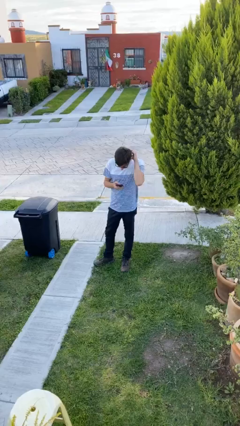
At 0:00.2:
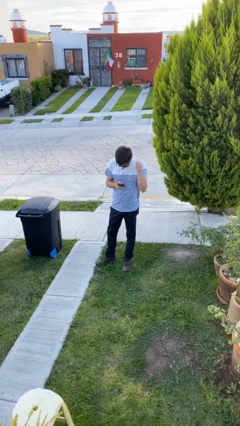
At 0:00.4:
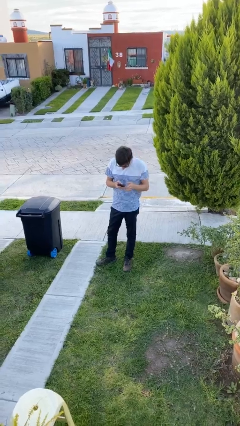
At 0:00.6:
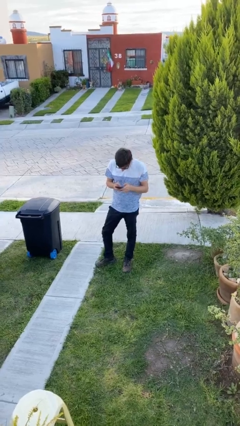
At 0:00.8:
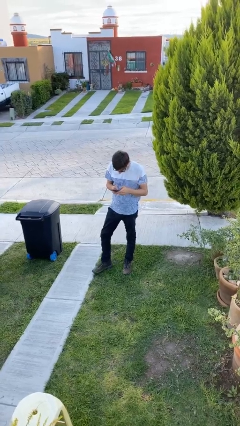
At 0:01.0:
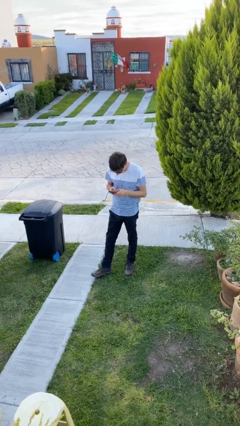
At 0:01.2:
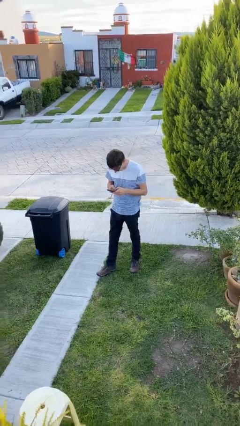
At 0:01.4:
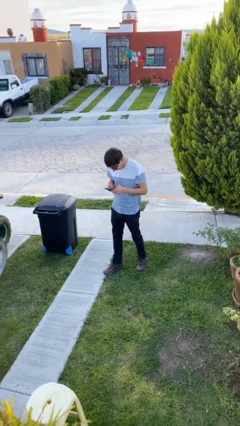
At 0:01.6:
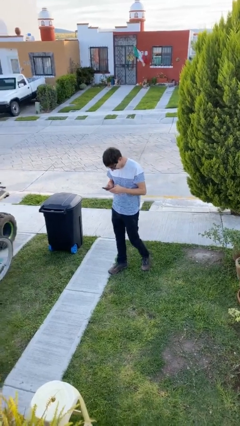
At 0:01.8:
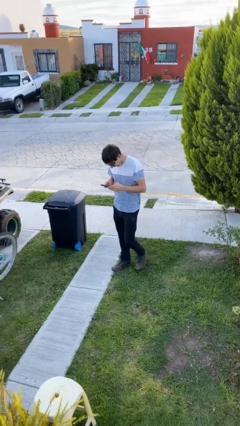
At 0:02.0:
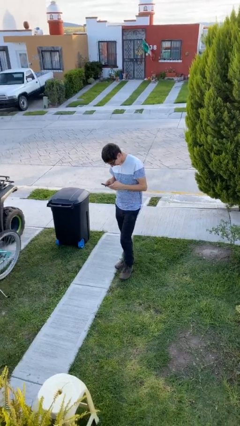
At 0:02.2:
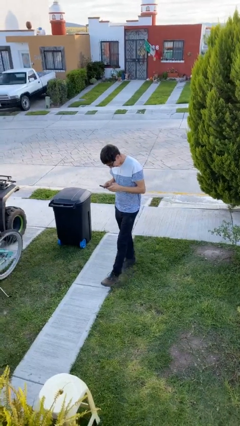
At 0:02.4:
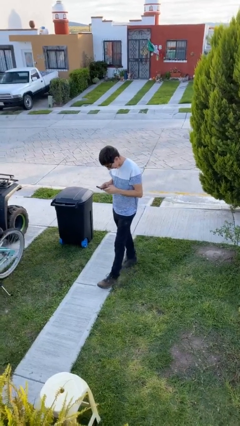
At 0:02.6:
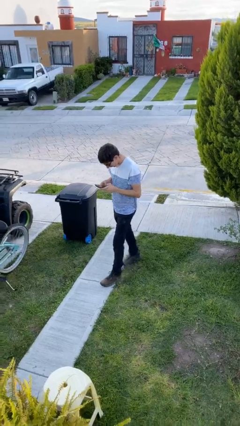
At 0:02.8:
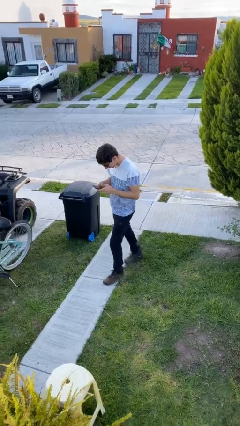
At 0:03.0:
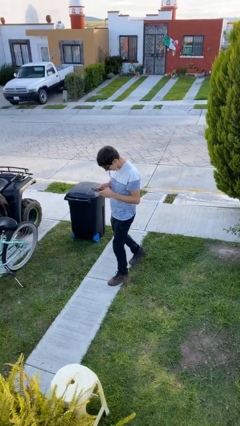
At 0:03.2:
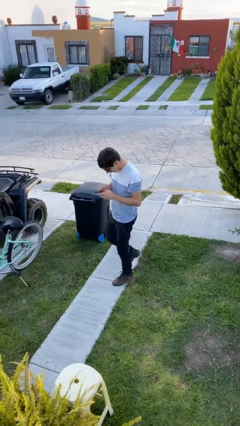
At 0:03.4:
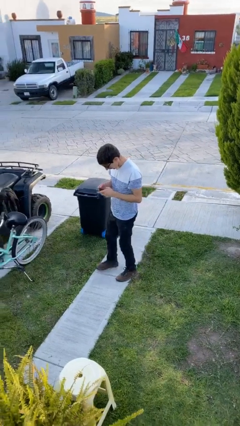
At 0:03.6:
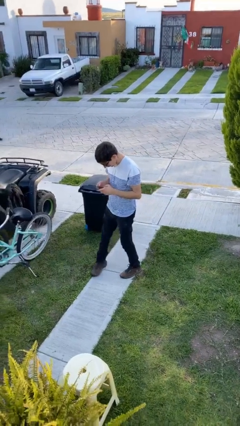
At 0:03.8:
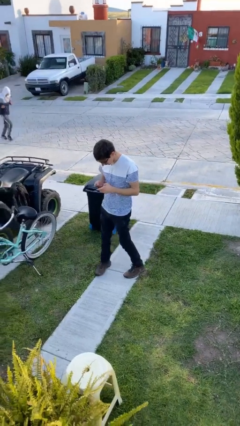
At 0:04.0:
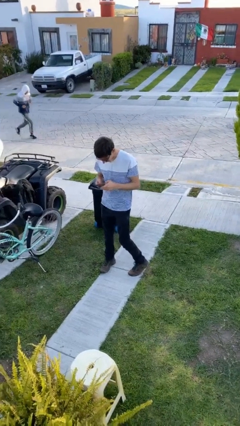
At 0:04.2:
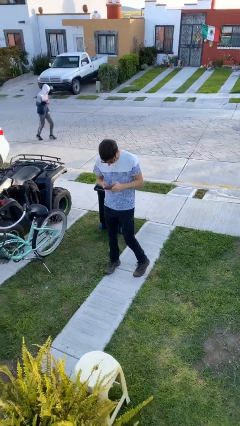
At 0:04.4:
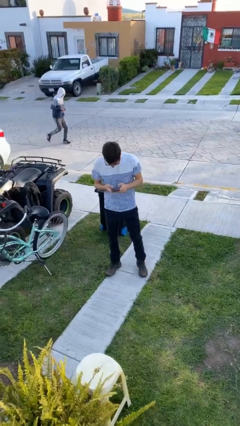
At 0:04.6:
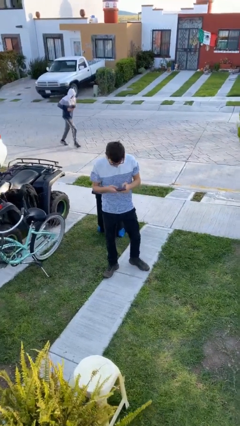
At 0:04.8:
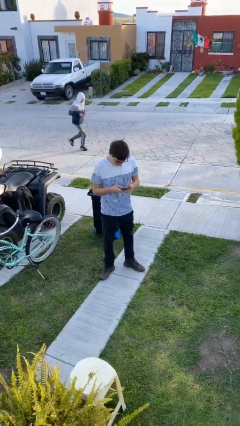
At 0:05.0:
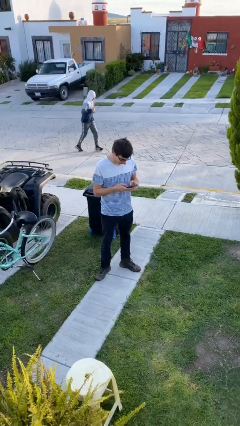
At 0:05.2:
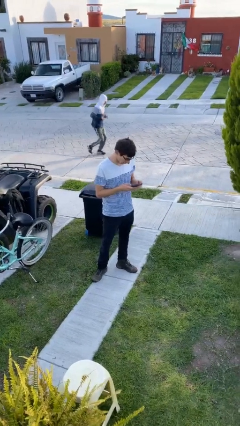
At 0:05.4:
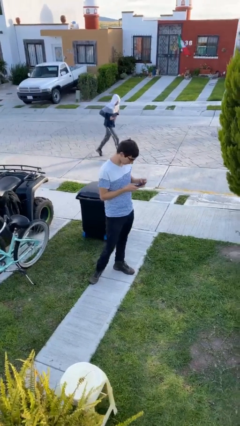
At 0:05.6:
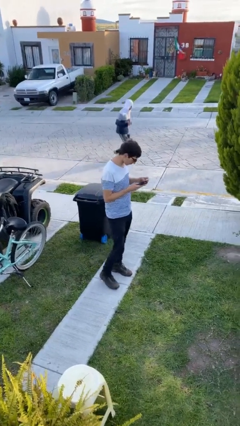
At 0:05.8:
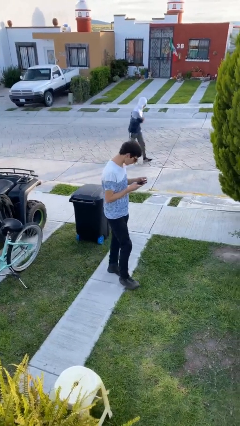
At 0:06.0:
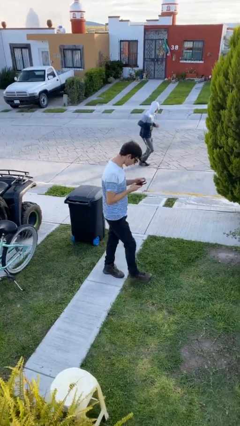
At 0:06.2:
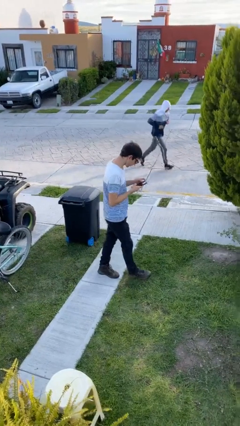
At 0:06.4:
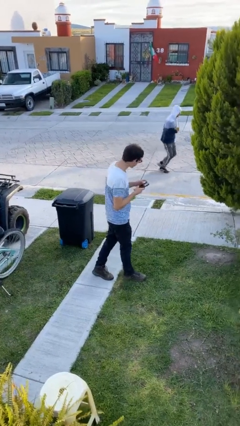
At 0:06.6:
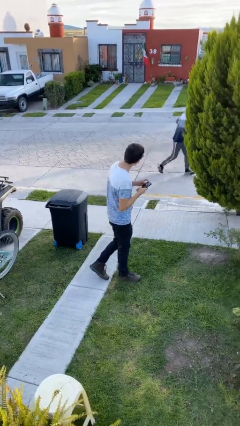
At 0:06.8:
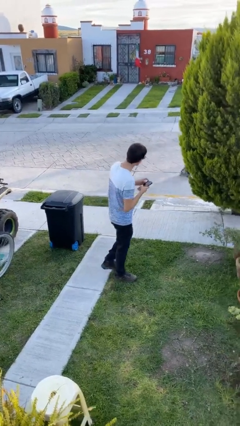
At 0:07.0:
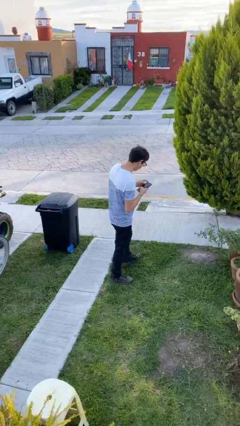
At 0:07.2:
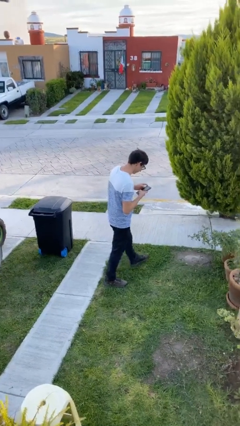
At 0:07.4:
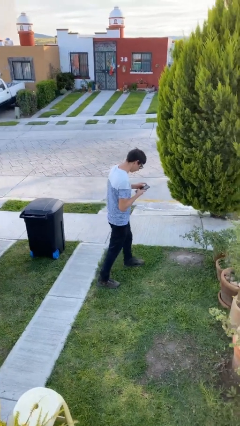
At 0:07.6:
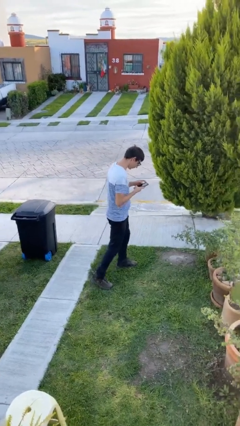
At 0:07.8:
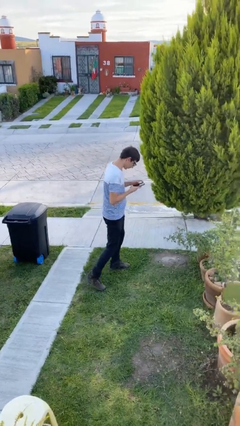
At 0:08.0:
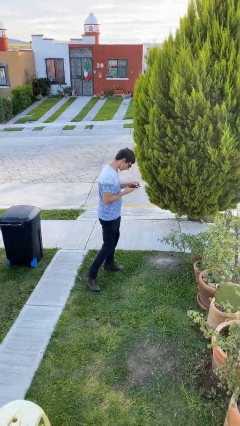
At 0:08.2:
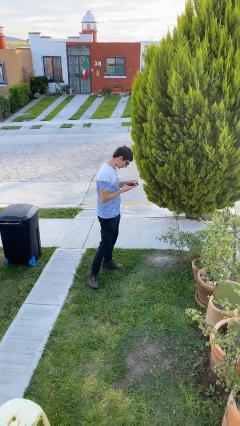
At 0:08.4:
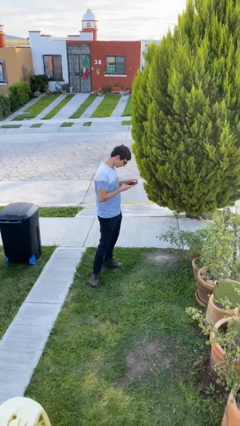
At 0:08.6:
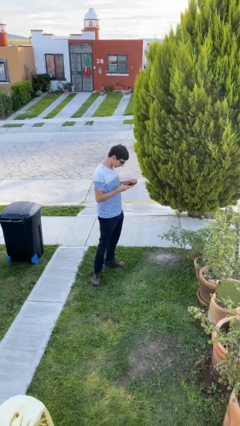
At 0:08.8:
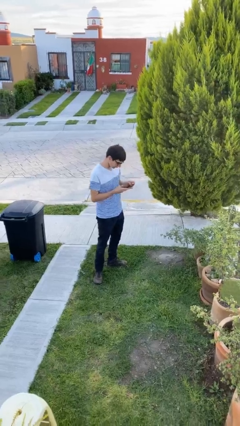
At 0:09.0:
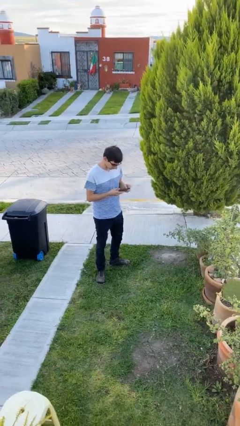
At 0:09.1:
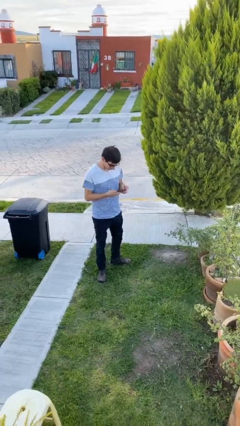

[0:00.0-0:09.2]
person texts on phone

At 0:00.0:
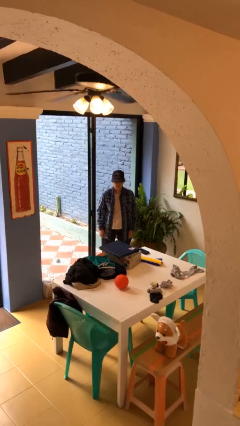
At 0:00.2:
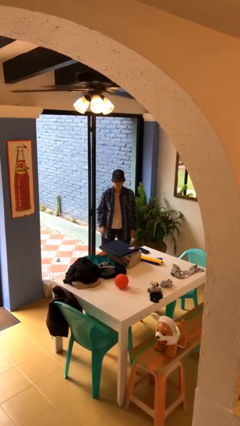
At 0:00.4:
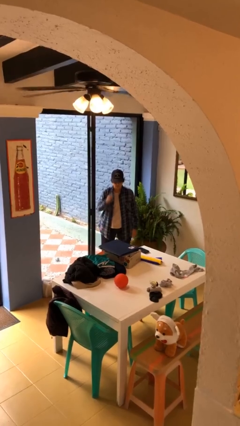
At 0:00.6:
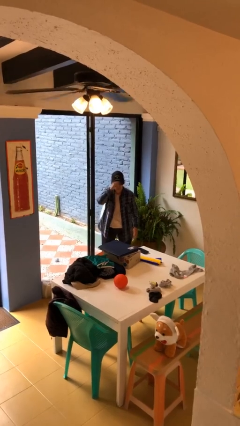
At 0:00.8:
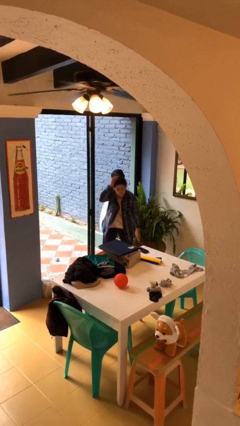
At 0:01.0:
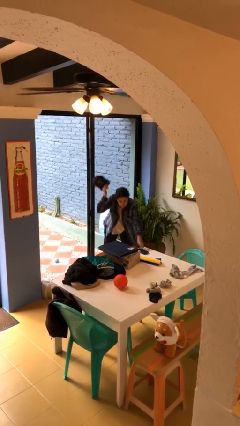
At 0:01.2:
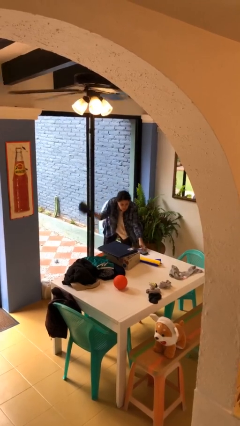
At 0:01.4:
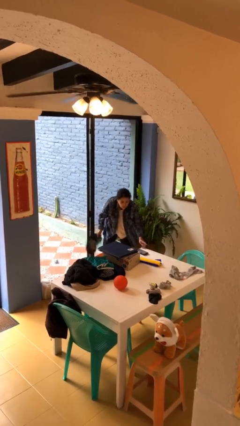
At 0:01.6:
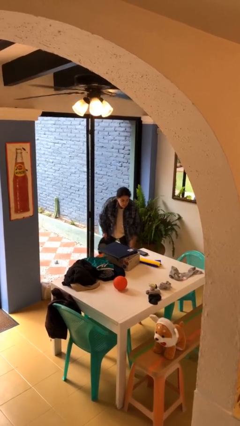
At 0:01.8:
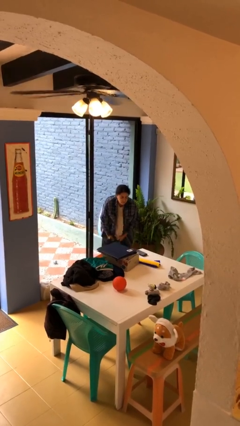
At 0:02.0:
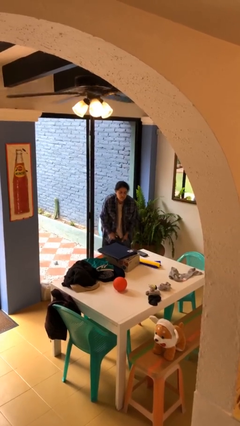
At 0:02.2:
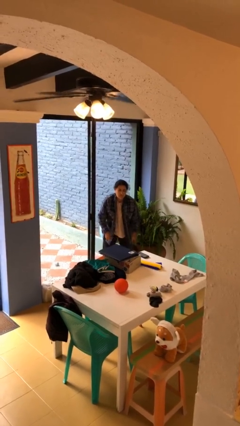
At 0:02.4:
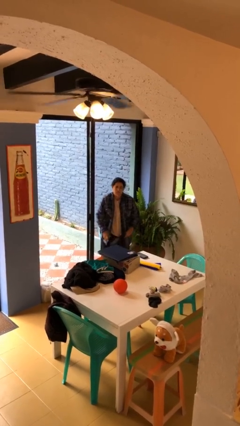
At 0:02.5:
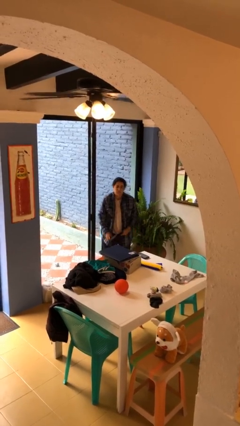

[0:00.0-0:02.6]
person takes off hat

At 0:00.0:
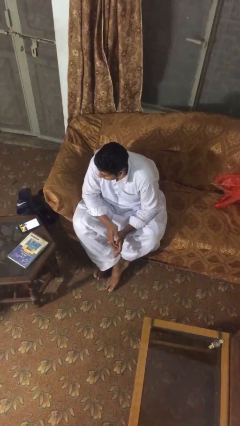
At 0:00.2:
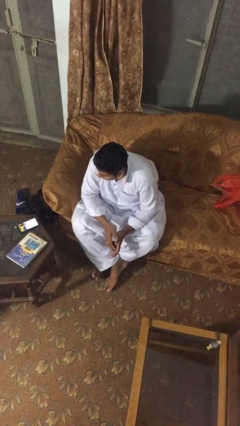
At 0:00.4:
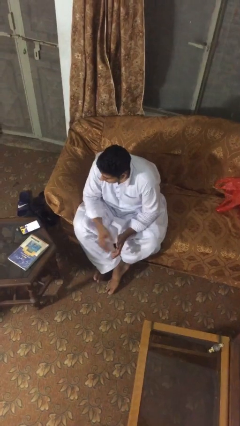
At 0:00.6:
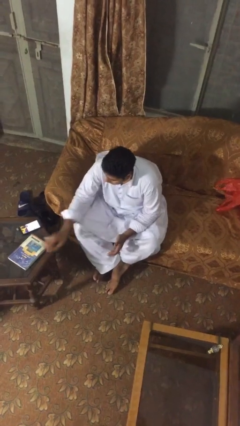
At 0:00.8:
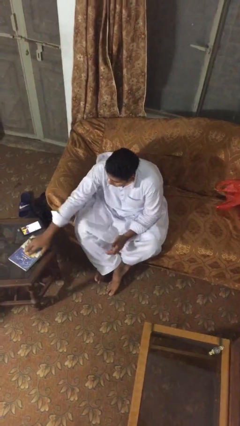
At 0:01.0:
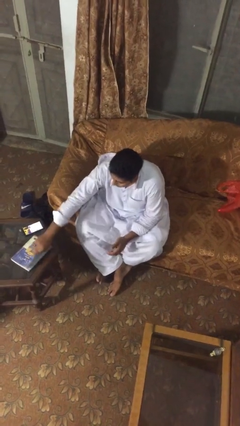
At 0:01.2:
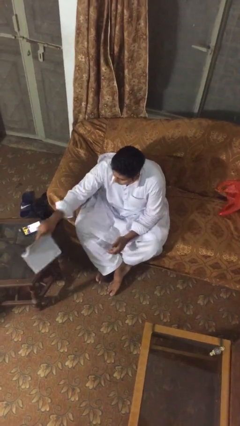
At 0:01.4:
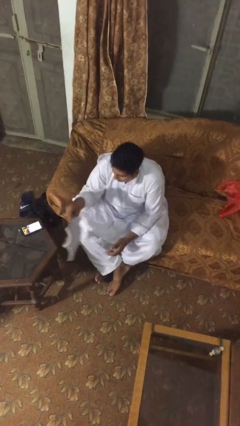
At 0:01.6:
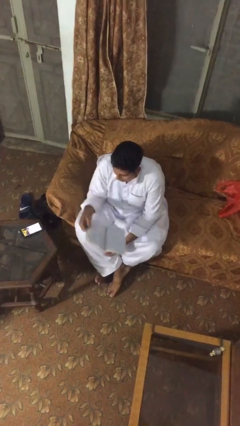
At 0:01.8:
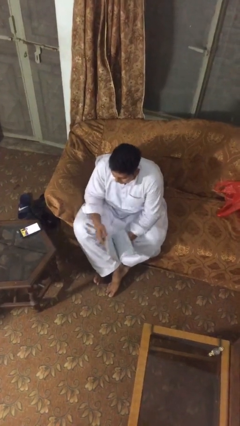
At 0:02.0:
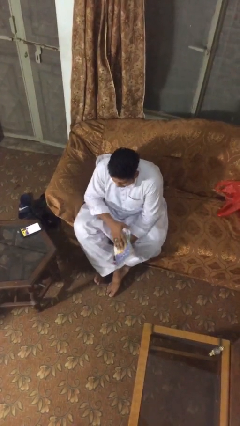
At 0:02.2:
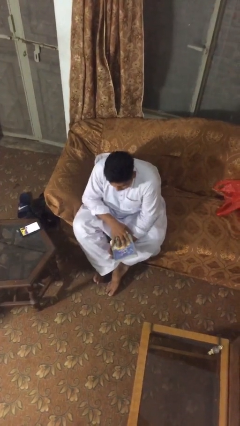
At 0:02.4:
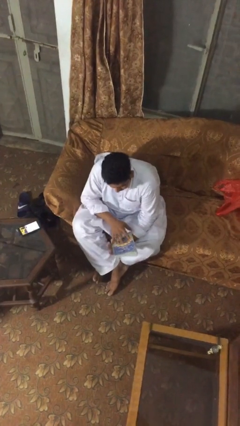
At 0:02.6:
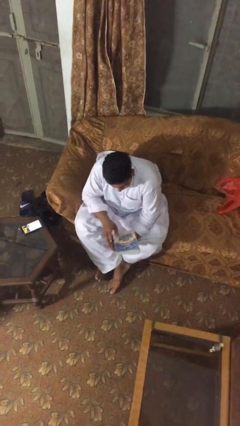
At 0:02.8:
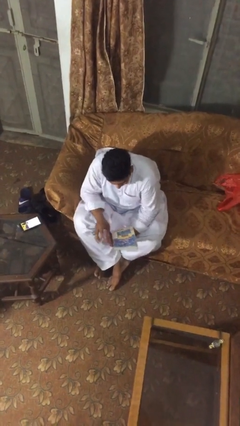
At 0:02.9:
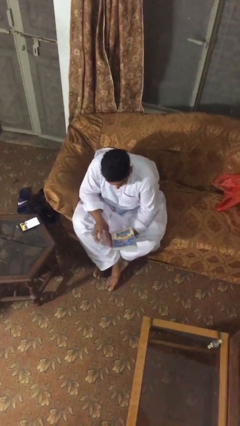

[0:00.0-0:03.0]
person picks up object from table

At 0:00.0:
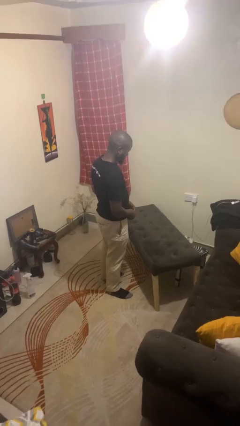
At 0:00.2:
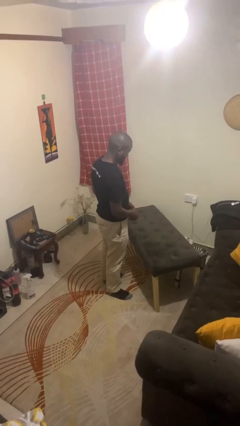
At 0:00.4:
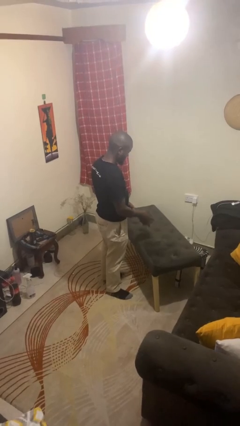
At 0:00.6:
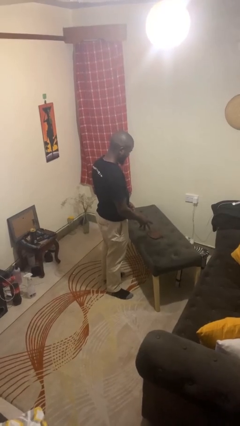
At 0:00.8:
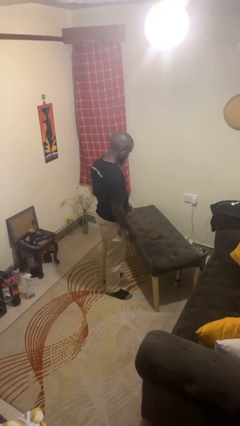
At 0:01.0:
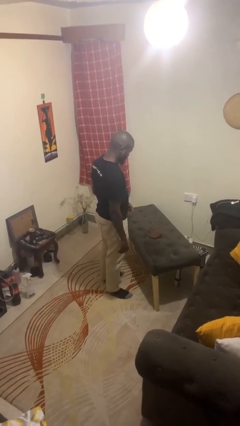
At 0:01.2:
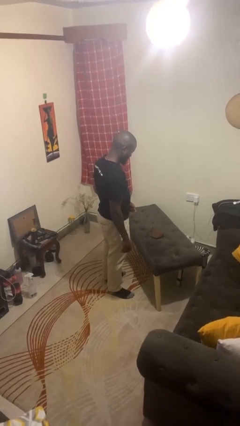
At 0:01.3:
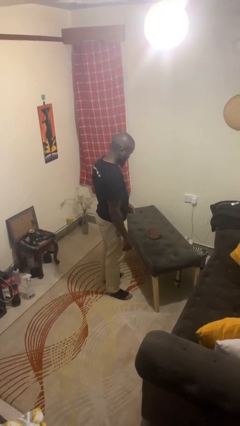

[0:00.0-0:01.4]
person throws object on table

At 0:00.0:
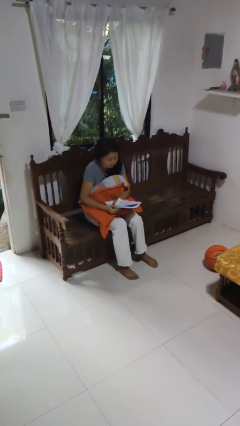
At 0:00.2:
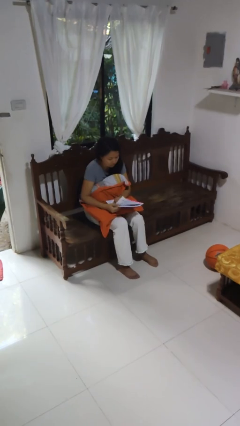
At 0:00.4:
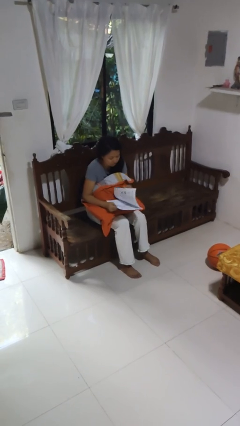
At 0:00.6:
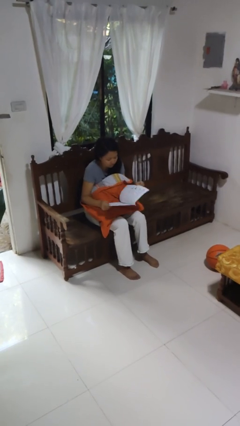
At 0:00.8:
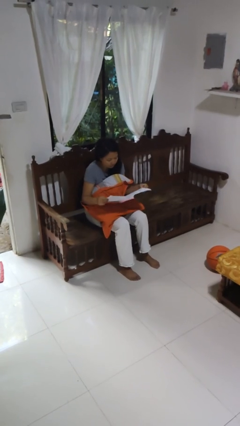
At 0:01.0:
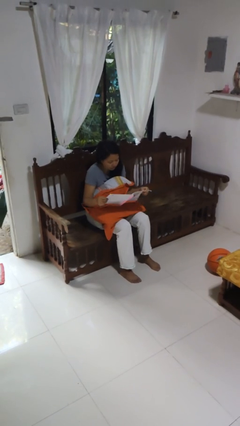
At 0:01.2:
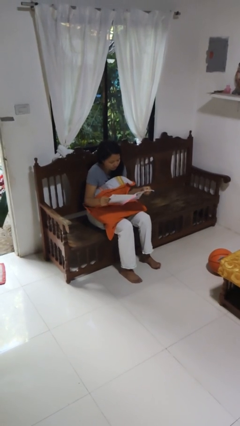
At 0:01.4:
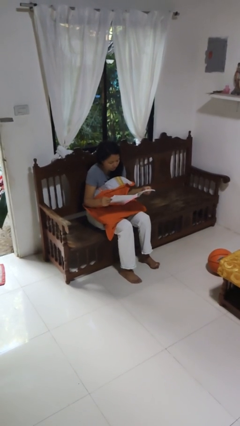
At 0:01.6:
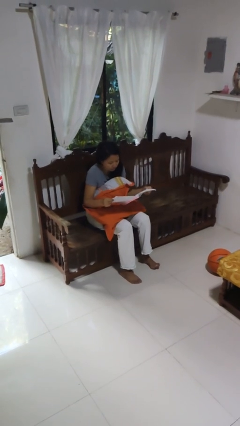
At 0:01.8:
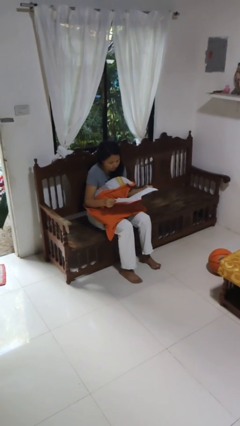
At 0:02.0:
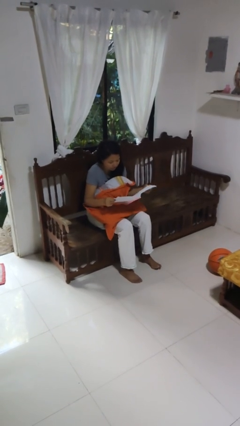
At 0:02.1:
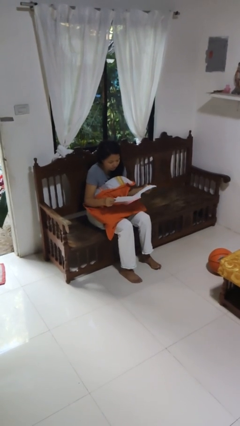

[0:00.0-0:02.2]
person reads newspaper
